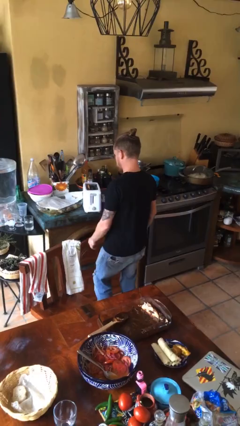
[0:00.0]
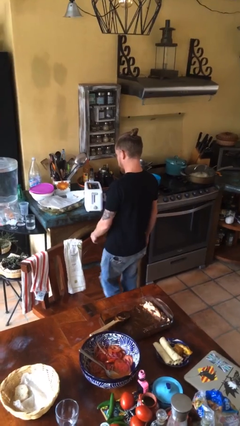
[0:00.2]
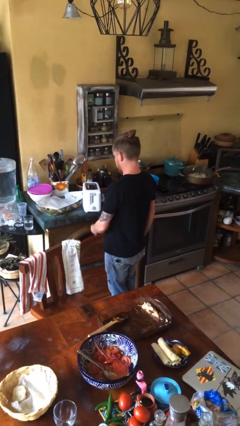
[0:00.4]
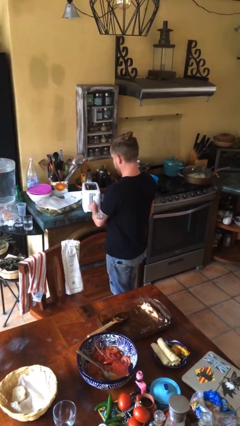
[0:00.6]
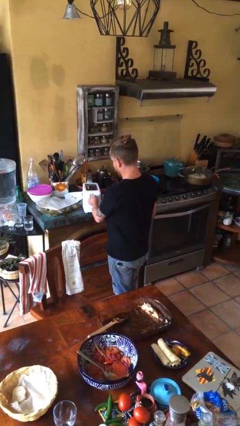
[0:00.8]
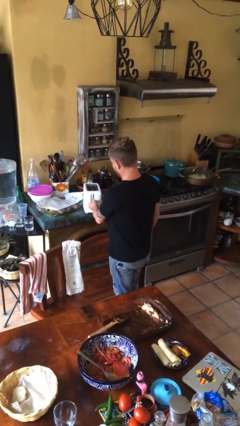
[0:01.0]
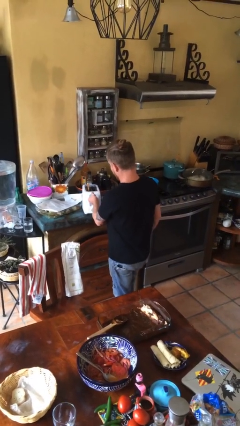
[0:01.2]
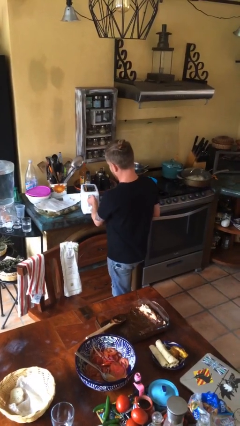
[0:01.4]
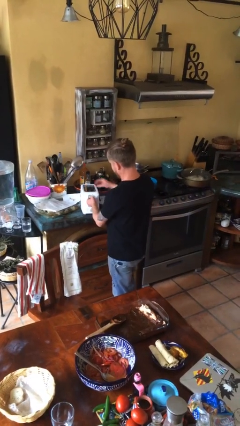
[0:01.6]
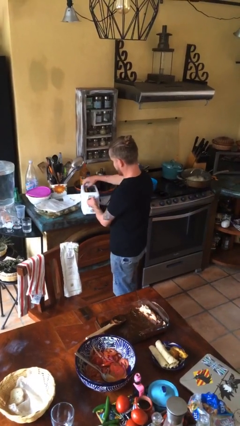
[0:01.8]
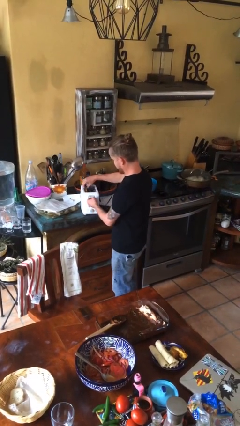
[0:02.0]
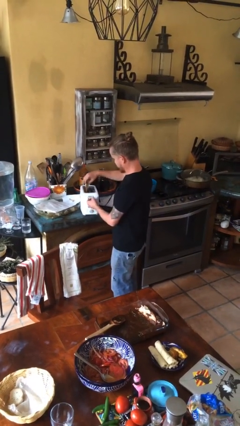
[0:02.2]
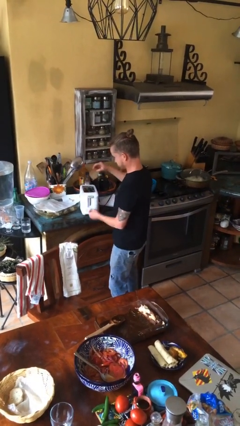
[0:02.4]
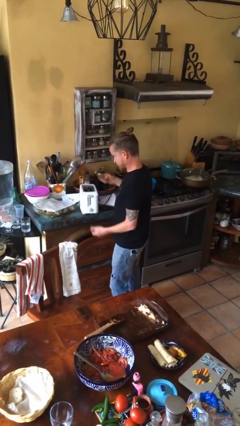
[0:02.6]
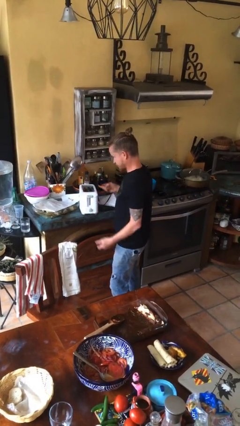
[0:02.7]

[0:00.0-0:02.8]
person takes object from toaster

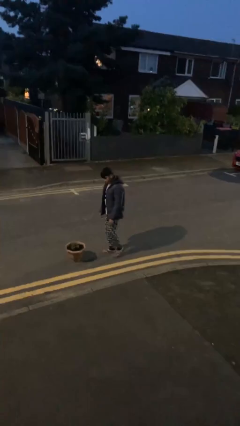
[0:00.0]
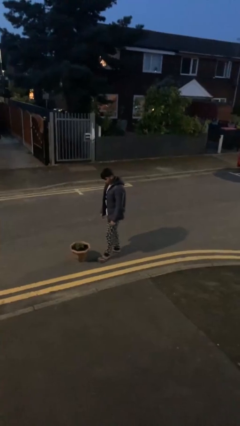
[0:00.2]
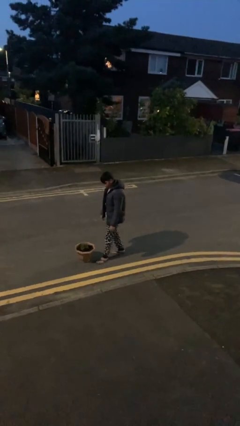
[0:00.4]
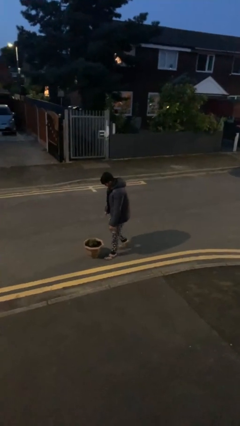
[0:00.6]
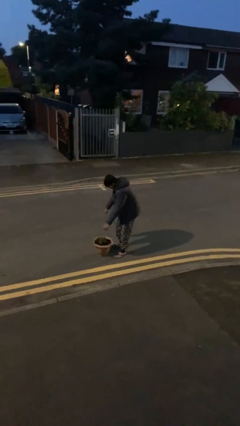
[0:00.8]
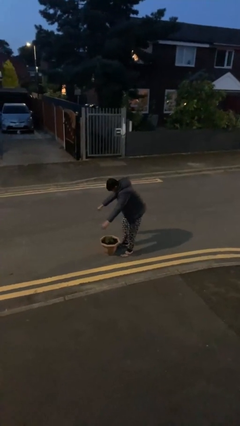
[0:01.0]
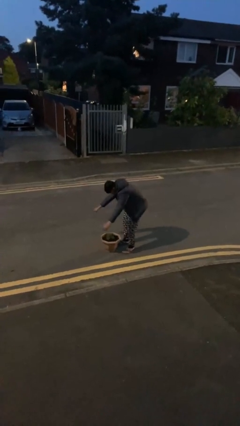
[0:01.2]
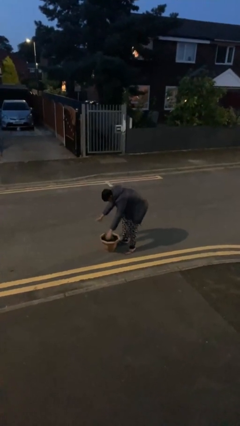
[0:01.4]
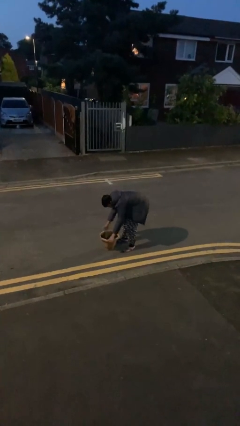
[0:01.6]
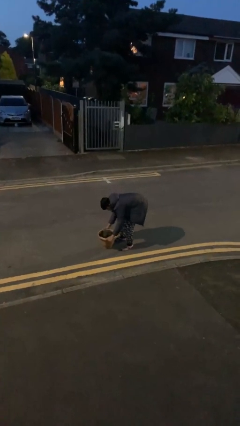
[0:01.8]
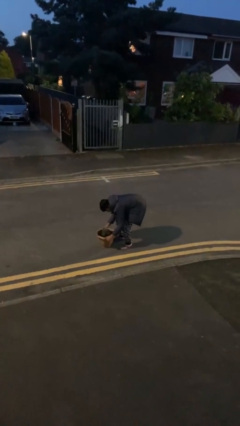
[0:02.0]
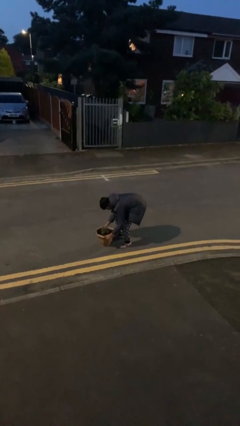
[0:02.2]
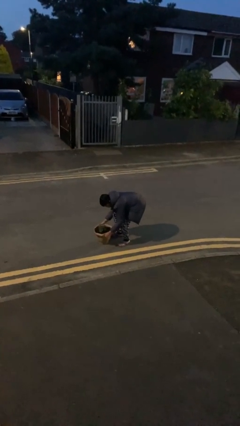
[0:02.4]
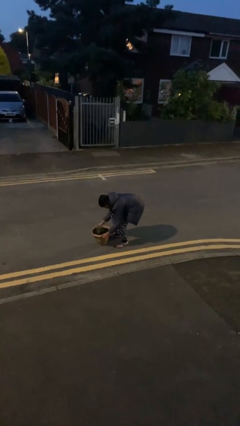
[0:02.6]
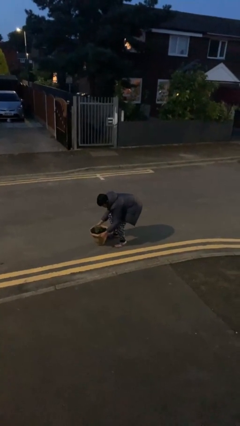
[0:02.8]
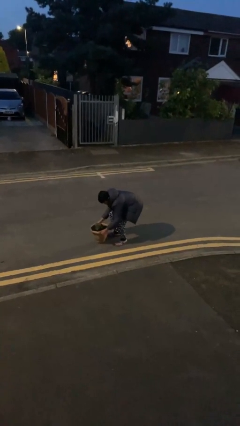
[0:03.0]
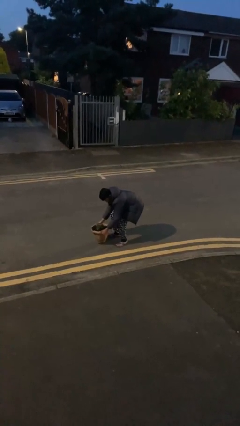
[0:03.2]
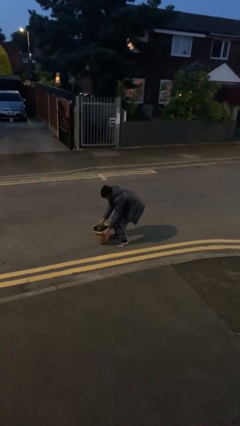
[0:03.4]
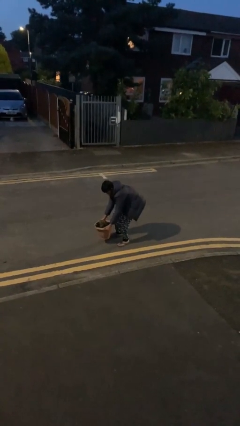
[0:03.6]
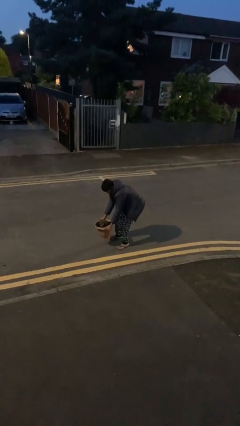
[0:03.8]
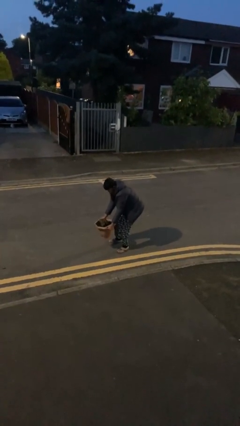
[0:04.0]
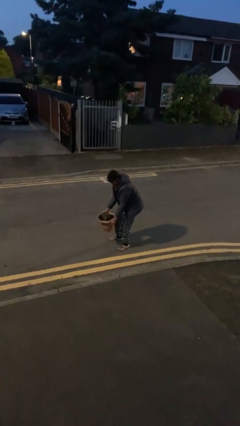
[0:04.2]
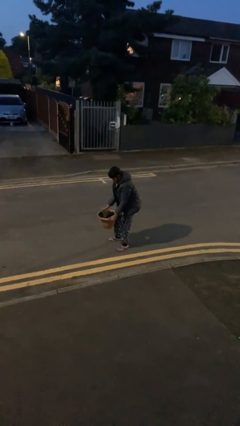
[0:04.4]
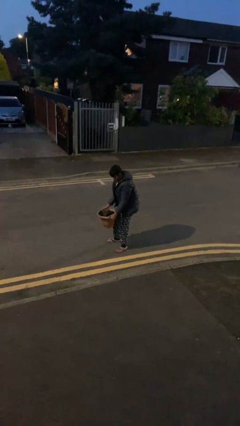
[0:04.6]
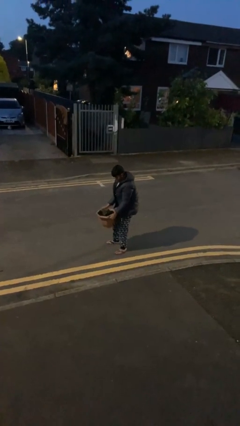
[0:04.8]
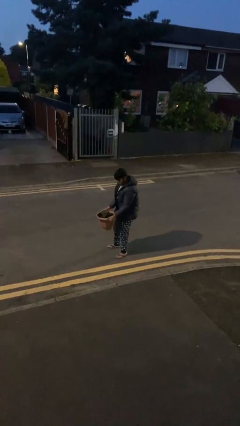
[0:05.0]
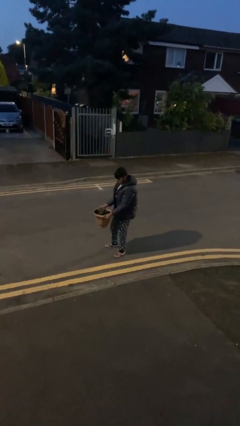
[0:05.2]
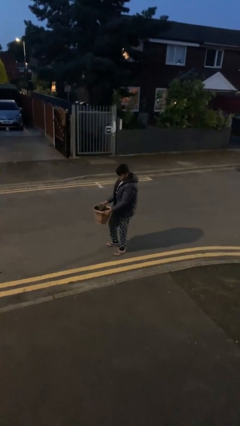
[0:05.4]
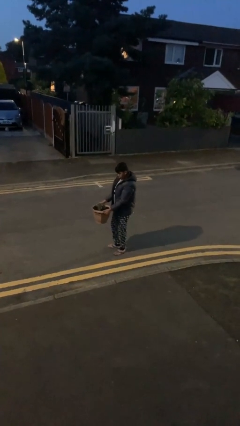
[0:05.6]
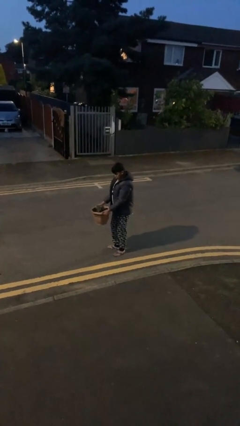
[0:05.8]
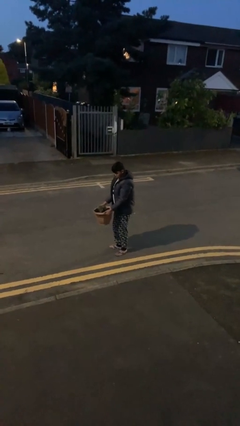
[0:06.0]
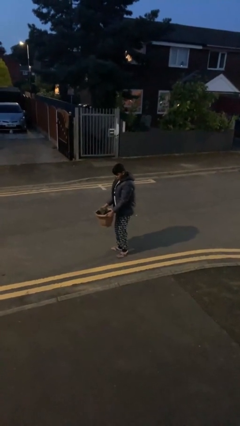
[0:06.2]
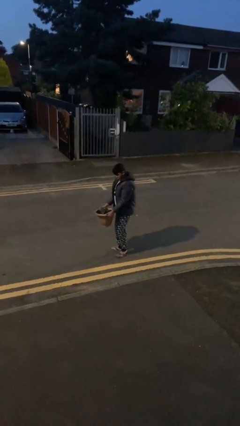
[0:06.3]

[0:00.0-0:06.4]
person picks up object from floor

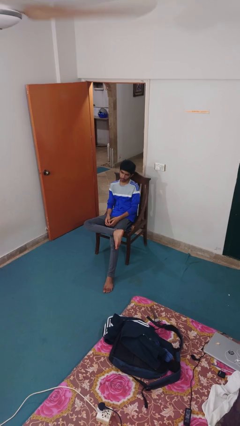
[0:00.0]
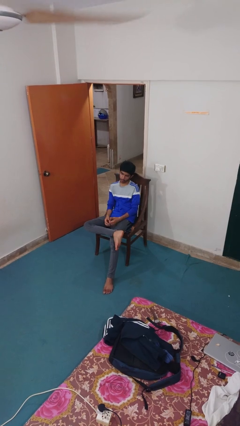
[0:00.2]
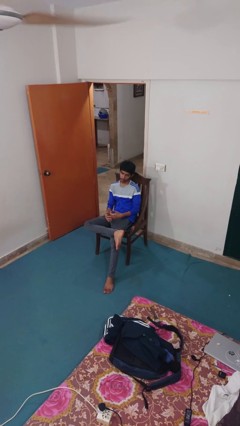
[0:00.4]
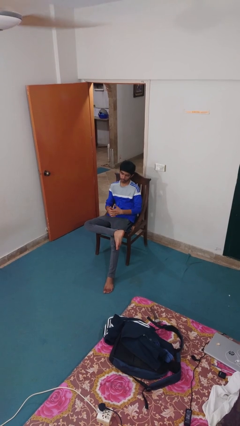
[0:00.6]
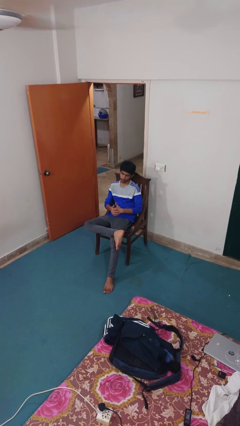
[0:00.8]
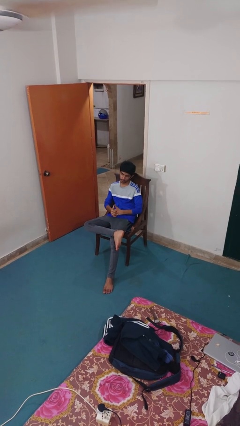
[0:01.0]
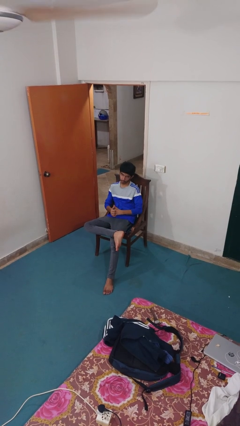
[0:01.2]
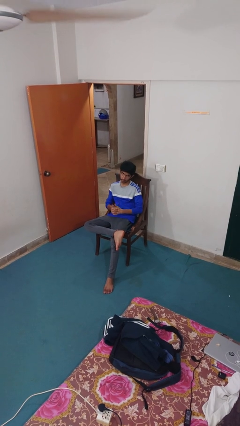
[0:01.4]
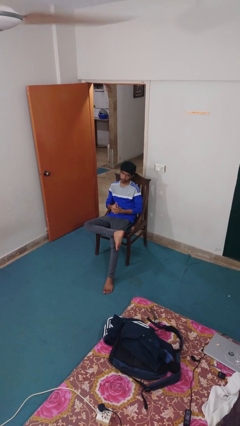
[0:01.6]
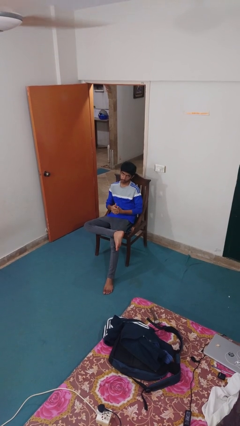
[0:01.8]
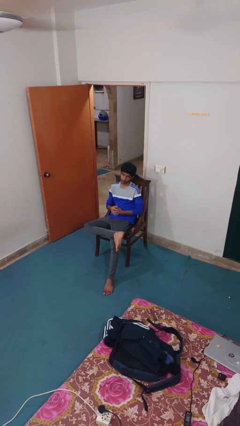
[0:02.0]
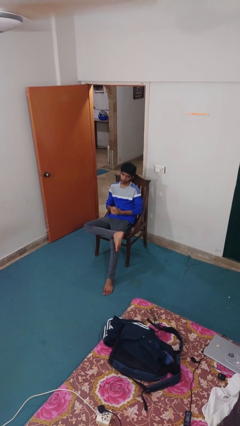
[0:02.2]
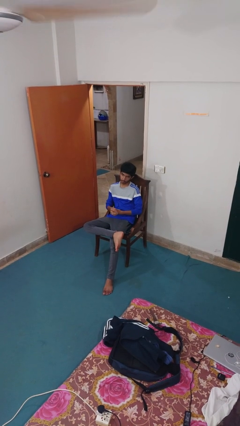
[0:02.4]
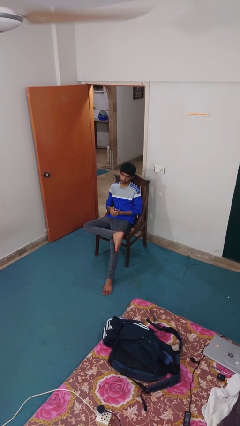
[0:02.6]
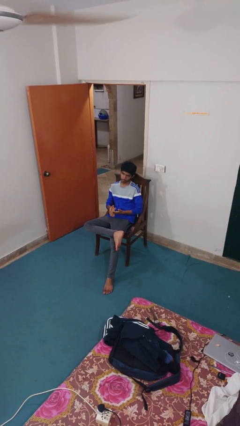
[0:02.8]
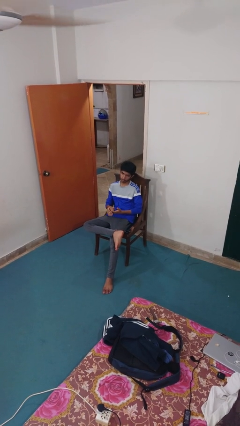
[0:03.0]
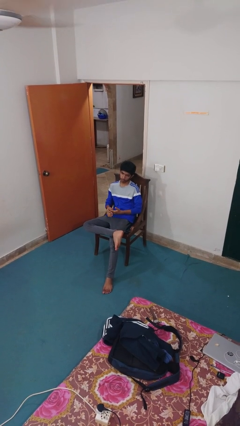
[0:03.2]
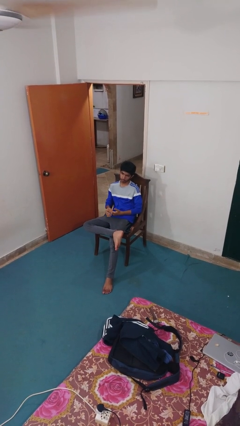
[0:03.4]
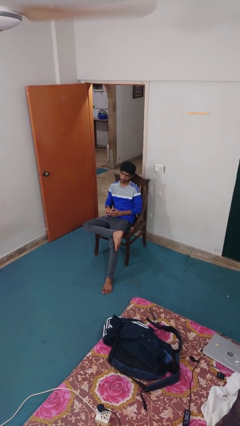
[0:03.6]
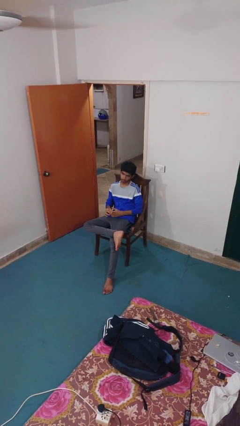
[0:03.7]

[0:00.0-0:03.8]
person snaps fingers

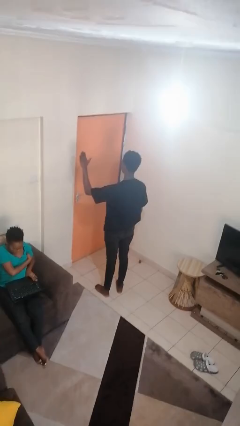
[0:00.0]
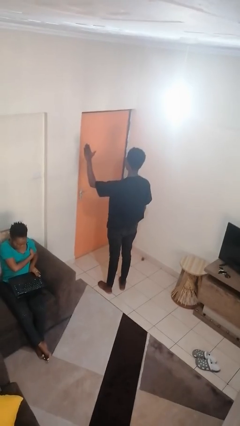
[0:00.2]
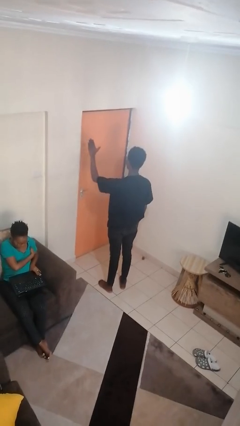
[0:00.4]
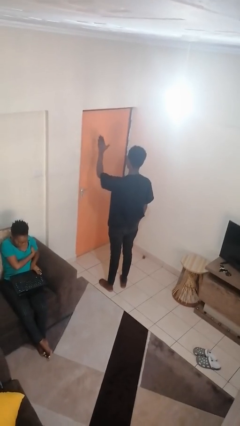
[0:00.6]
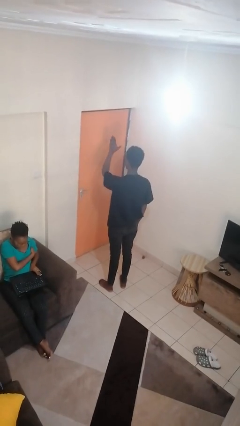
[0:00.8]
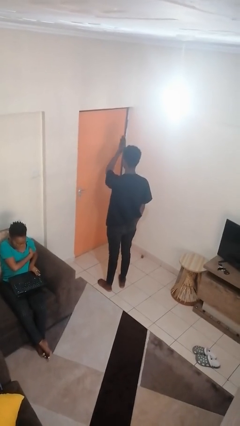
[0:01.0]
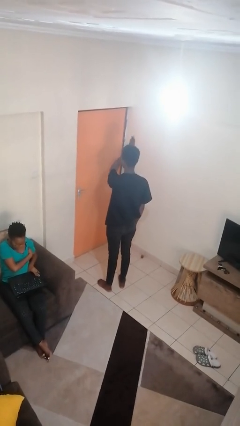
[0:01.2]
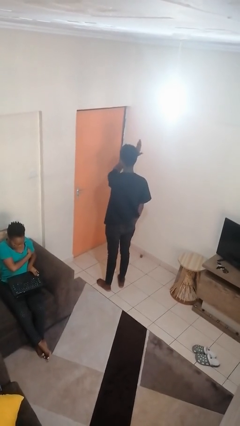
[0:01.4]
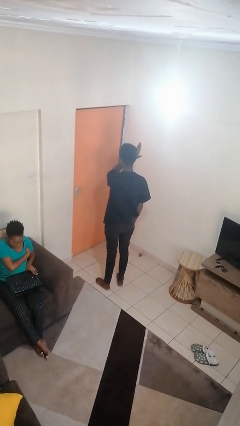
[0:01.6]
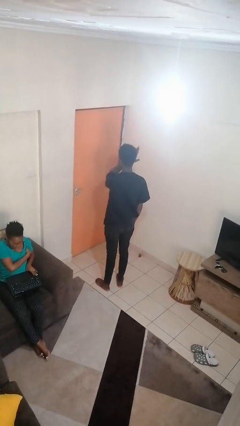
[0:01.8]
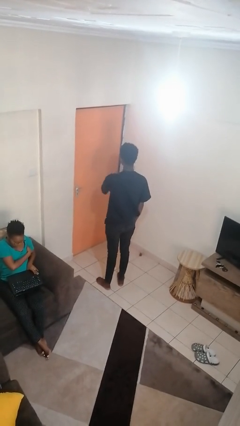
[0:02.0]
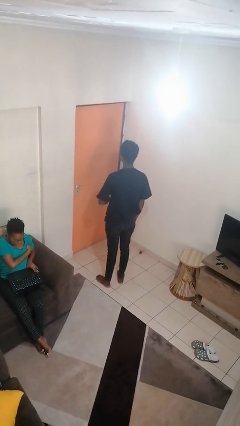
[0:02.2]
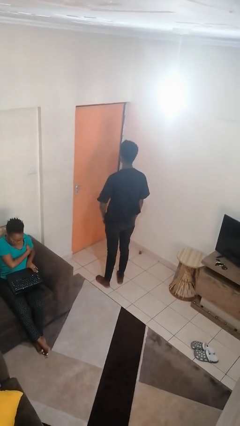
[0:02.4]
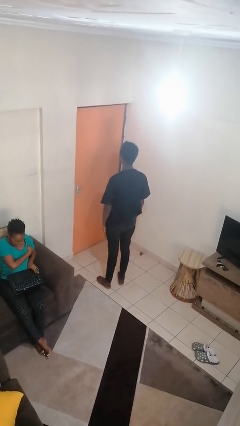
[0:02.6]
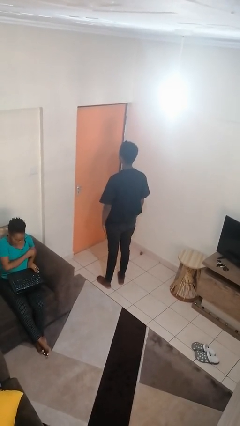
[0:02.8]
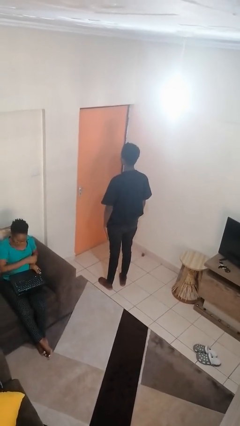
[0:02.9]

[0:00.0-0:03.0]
person gestures swipe right

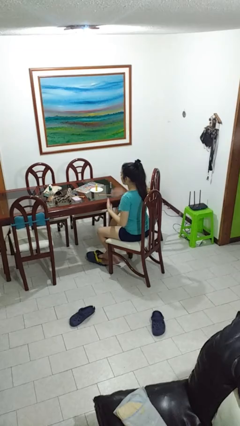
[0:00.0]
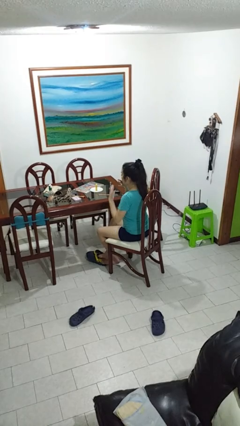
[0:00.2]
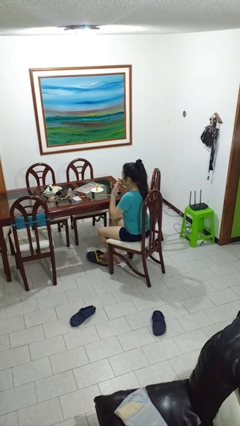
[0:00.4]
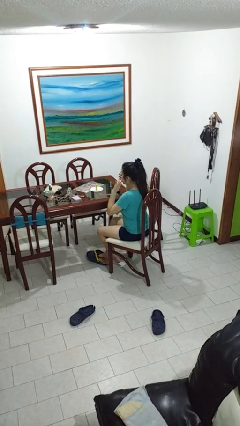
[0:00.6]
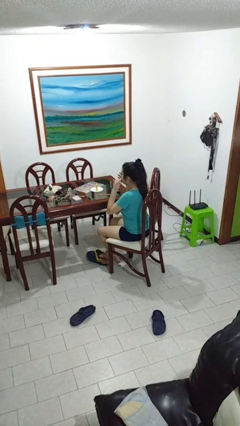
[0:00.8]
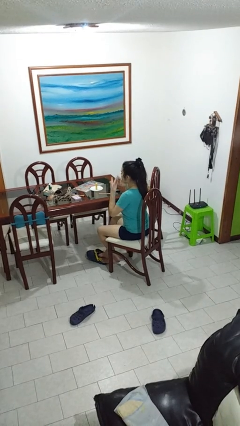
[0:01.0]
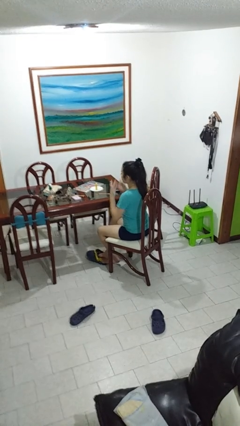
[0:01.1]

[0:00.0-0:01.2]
person licks fingers

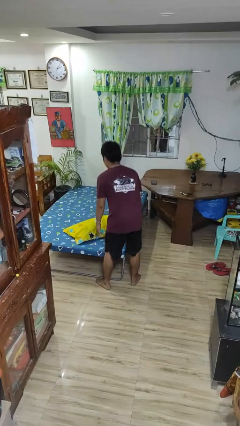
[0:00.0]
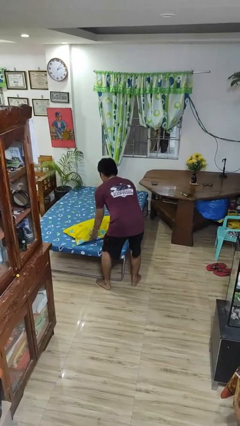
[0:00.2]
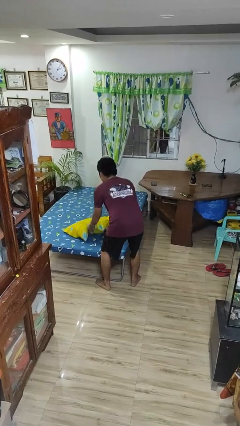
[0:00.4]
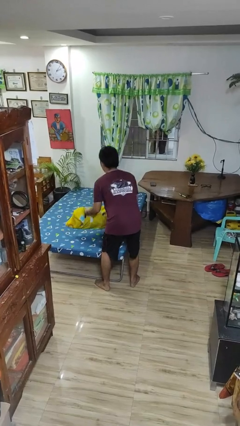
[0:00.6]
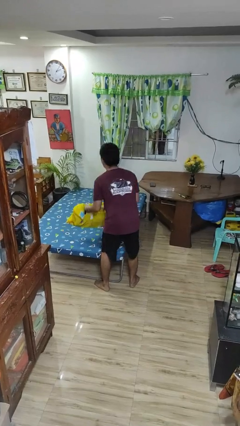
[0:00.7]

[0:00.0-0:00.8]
person picks up object from bed
